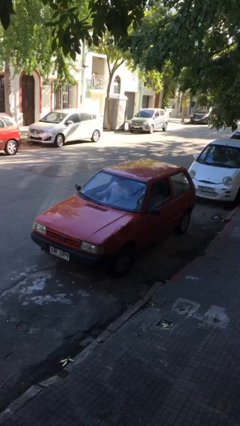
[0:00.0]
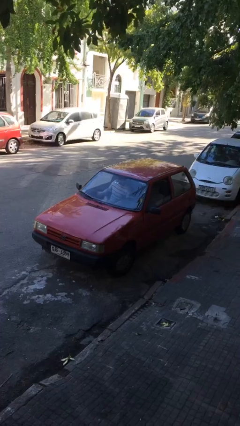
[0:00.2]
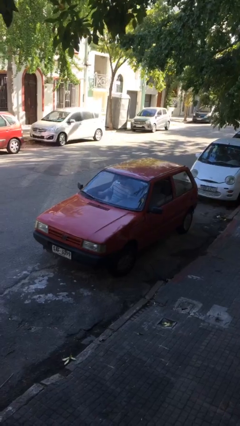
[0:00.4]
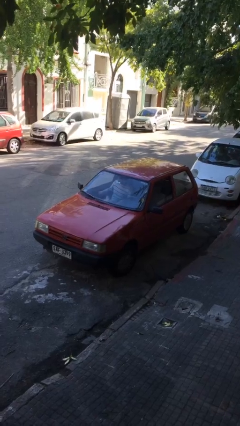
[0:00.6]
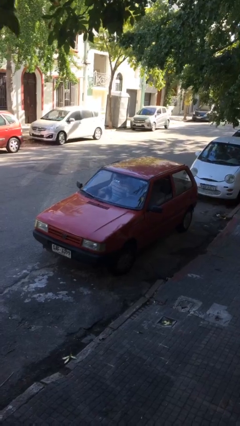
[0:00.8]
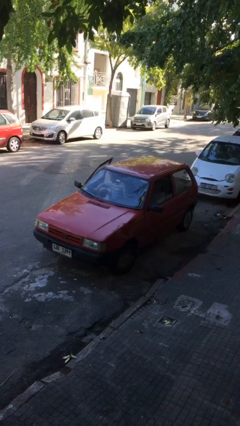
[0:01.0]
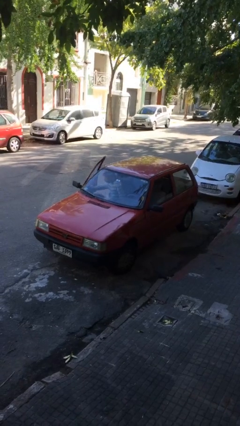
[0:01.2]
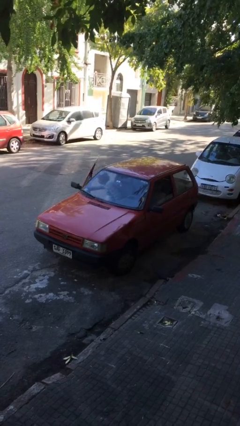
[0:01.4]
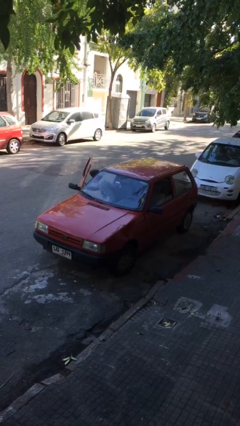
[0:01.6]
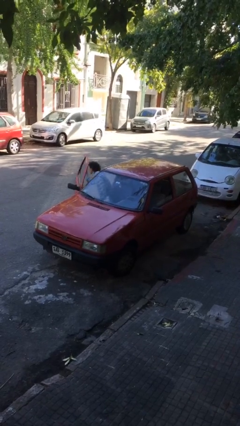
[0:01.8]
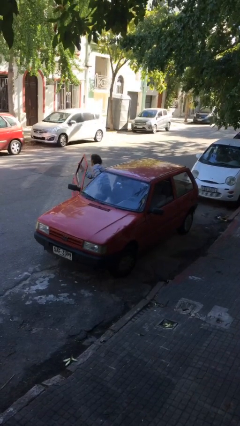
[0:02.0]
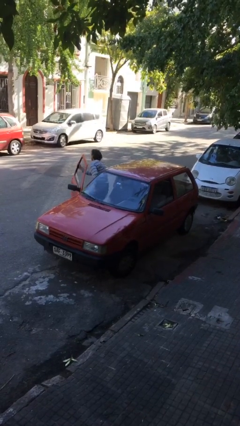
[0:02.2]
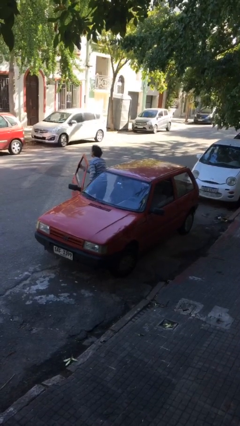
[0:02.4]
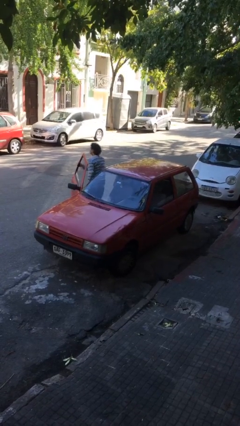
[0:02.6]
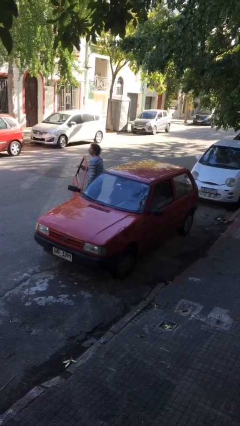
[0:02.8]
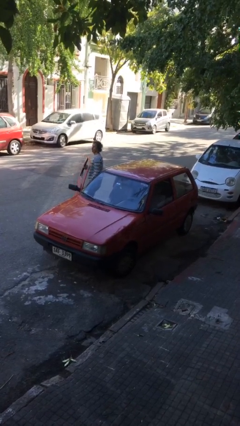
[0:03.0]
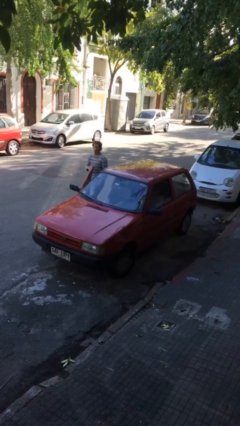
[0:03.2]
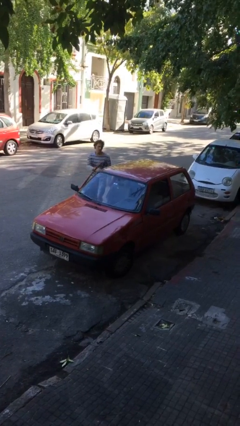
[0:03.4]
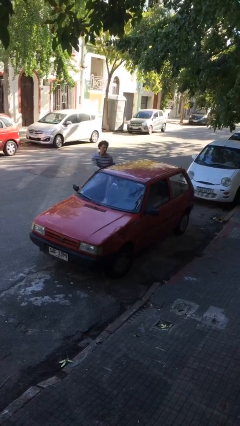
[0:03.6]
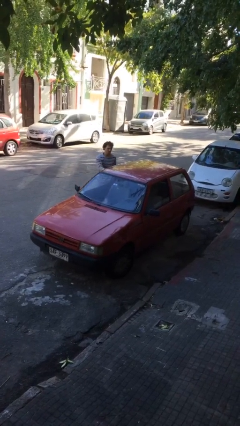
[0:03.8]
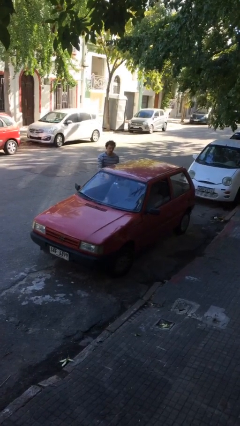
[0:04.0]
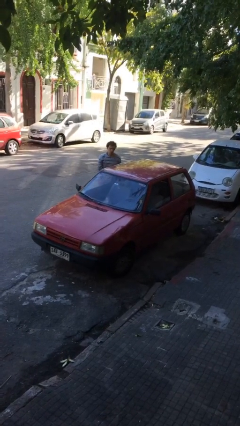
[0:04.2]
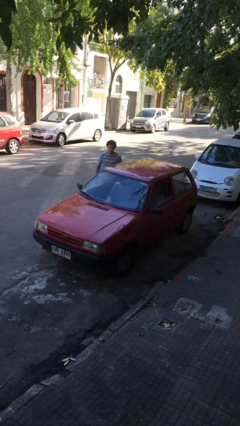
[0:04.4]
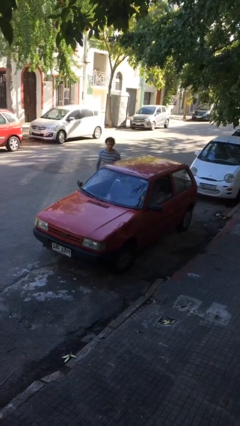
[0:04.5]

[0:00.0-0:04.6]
car drops off person

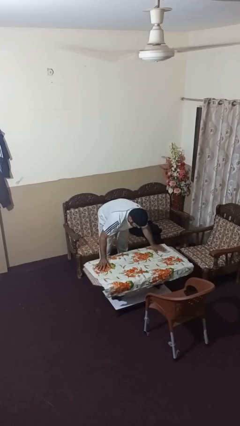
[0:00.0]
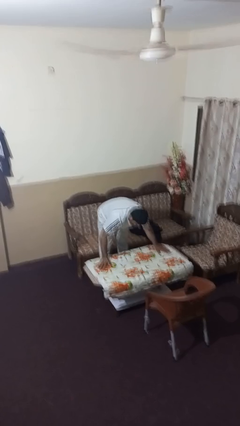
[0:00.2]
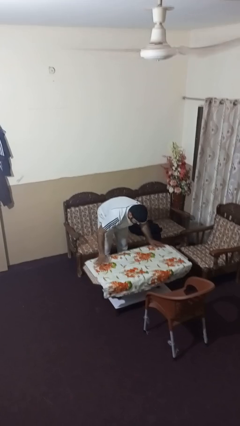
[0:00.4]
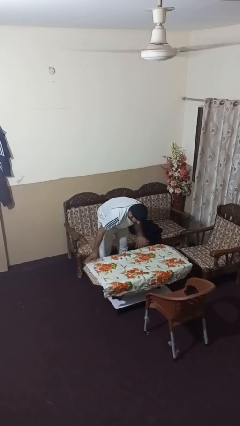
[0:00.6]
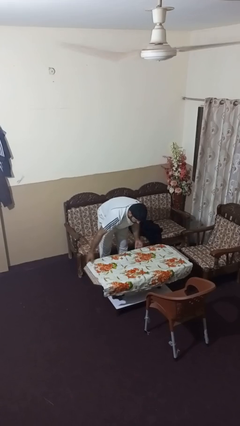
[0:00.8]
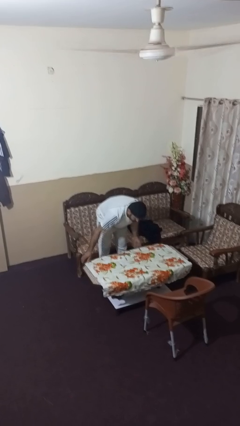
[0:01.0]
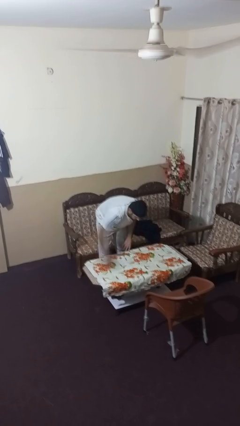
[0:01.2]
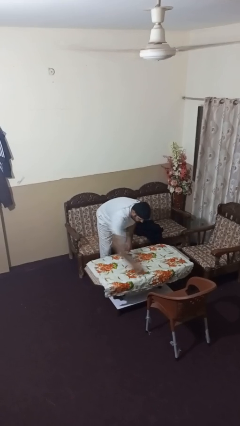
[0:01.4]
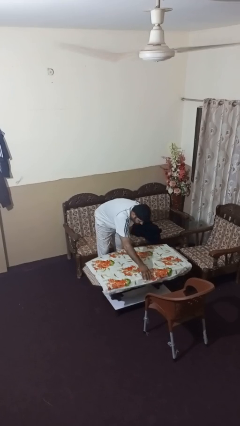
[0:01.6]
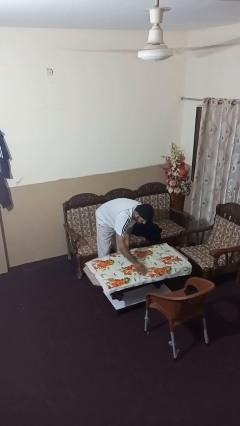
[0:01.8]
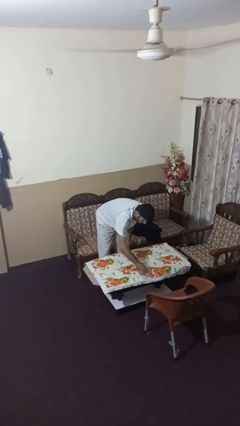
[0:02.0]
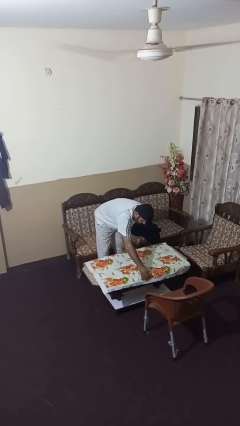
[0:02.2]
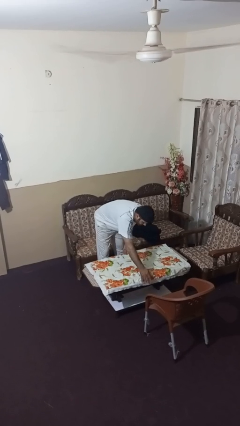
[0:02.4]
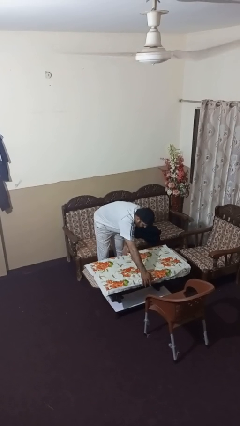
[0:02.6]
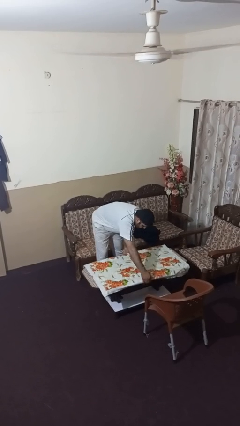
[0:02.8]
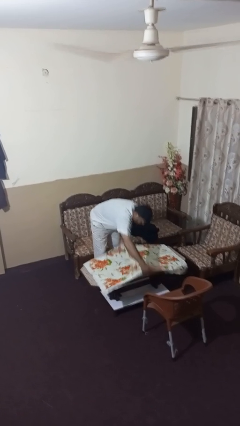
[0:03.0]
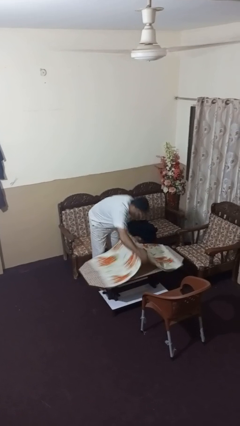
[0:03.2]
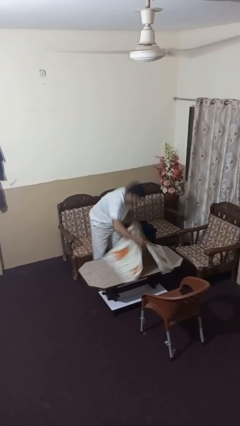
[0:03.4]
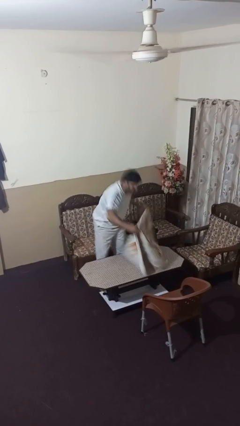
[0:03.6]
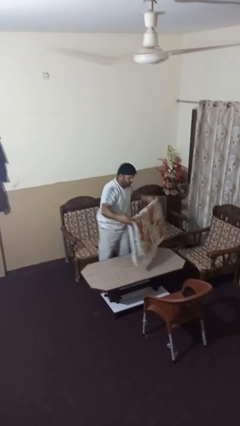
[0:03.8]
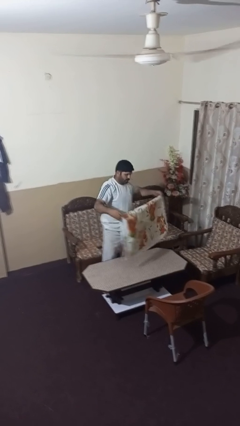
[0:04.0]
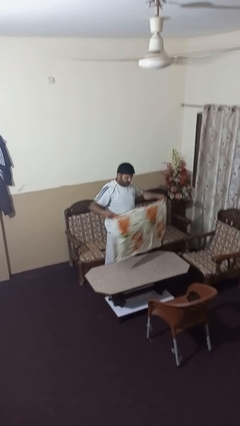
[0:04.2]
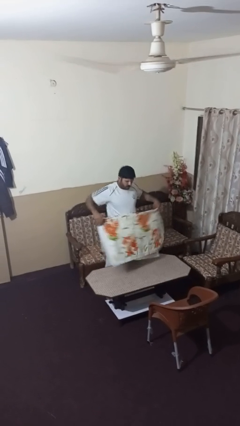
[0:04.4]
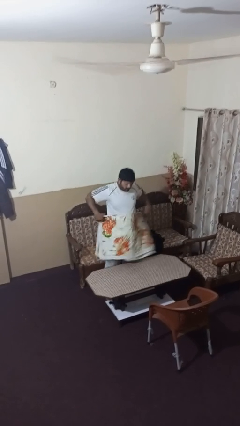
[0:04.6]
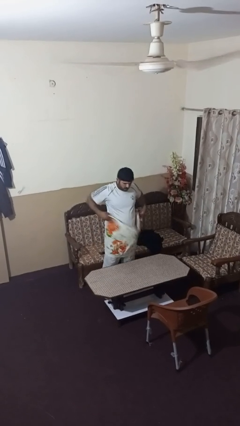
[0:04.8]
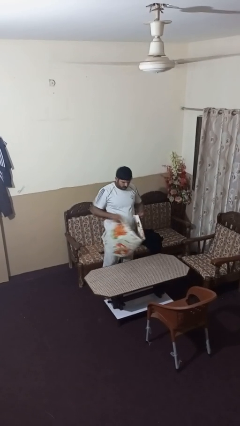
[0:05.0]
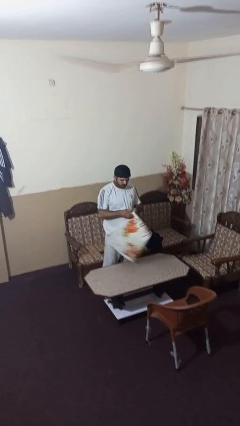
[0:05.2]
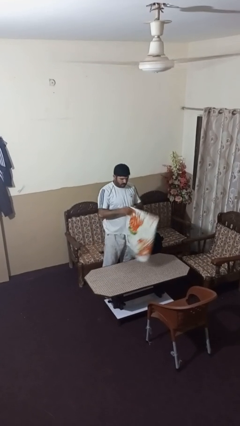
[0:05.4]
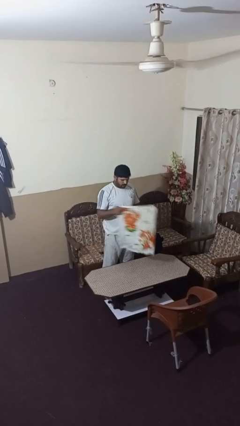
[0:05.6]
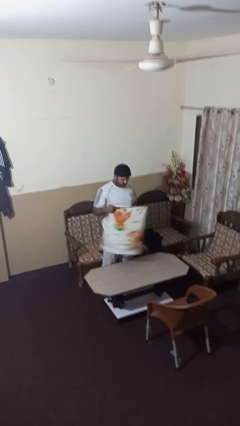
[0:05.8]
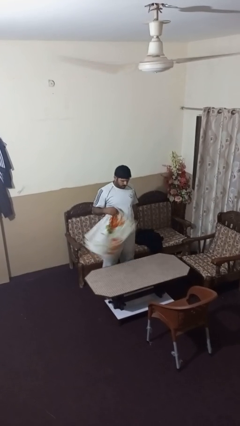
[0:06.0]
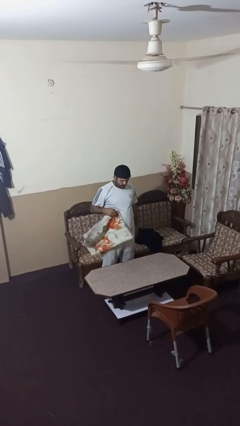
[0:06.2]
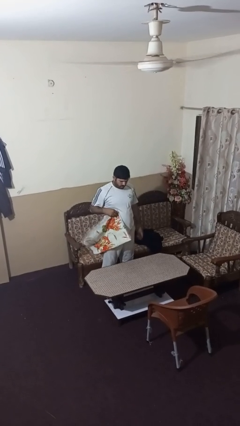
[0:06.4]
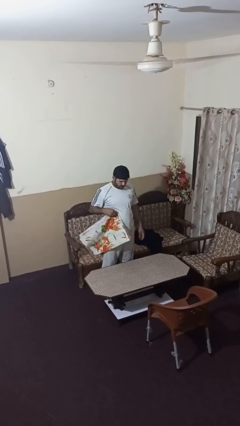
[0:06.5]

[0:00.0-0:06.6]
person folds tablecloth

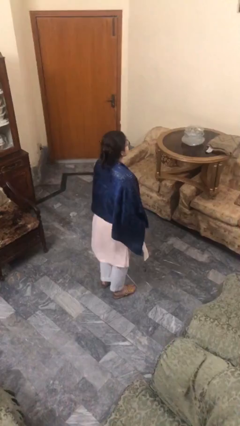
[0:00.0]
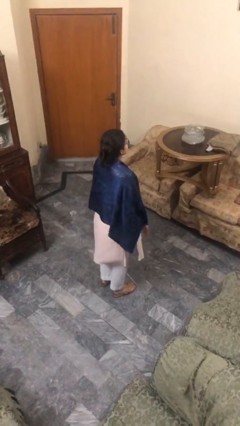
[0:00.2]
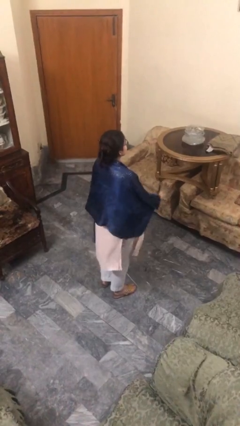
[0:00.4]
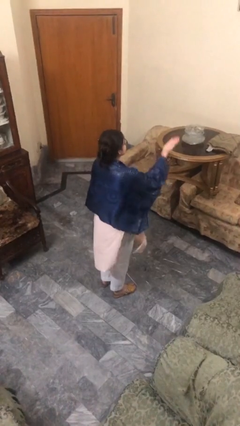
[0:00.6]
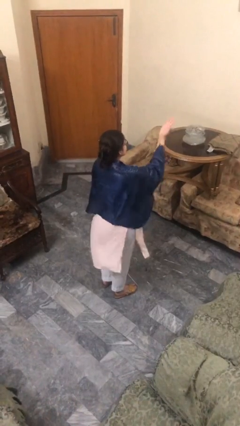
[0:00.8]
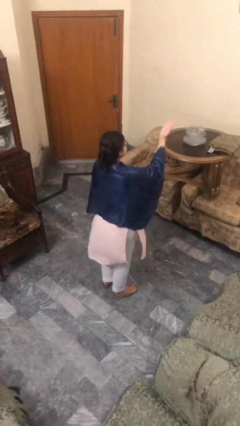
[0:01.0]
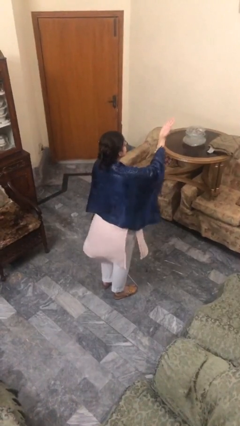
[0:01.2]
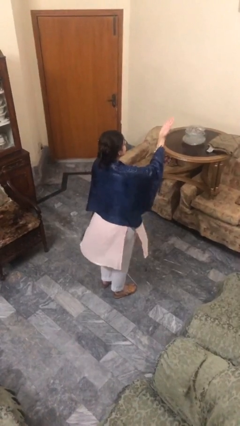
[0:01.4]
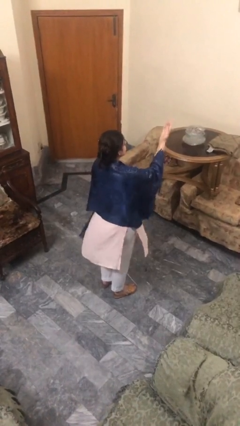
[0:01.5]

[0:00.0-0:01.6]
person gestures swipe up

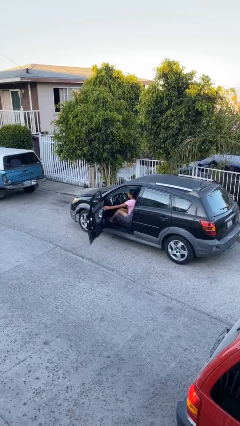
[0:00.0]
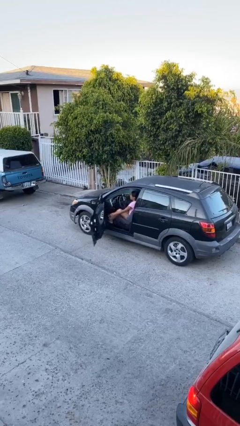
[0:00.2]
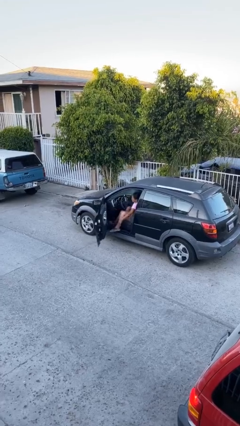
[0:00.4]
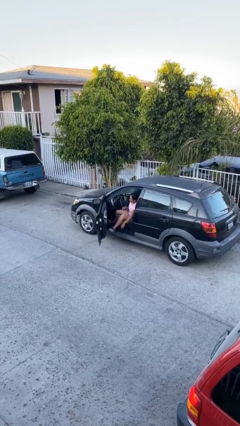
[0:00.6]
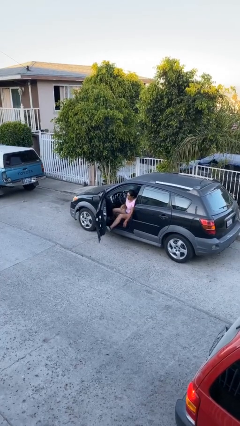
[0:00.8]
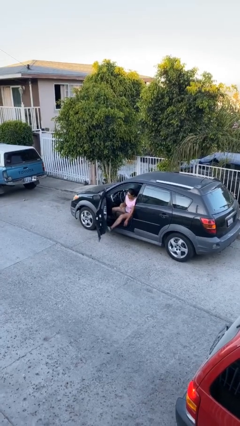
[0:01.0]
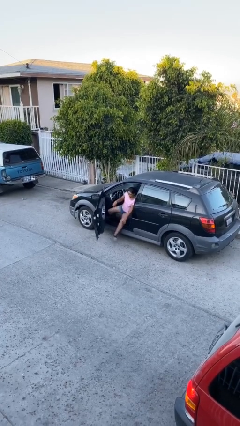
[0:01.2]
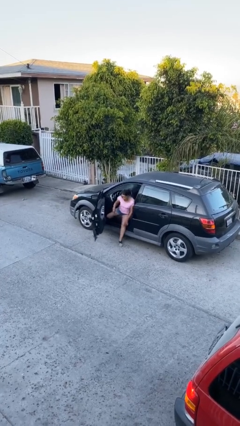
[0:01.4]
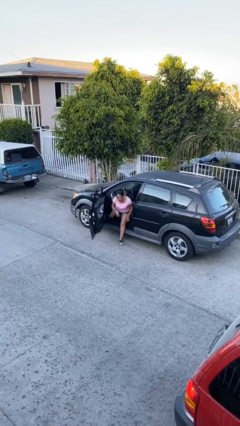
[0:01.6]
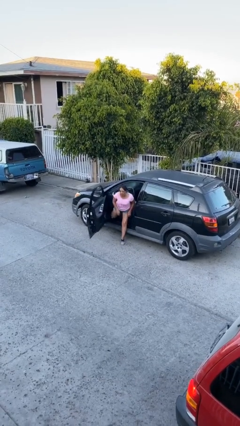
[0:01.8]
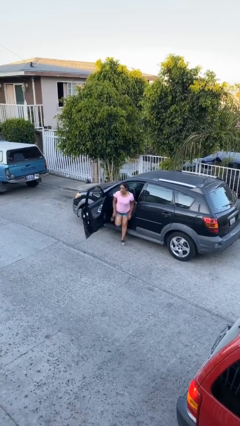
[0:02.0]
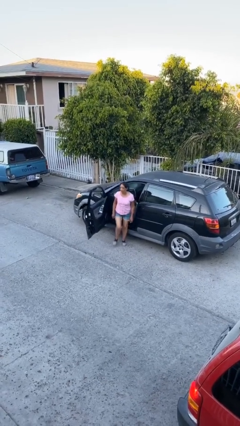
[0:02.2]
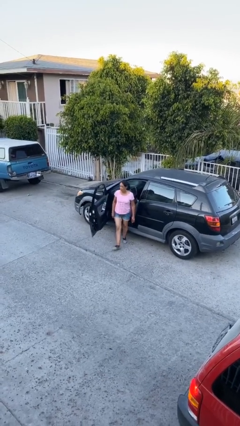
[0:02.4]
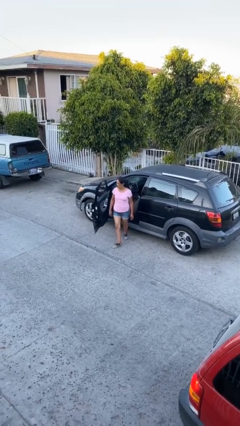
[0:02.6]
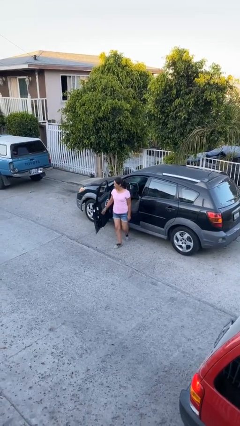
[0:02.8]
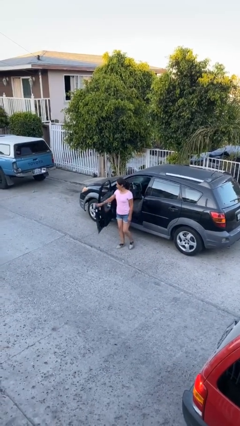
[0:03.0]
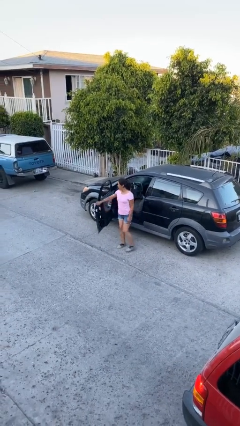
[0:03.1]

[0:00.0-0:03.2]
person exits car

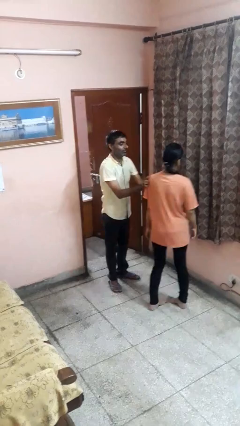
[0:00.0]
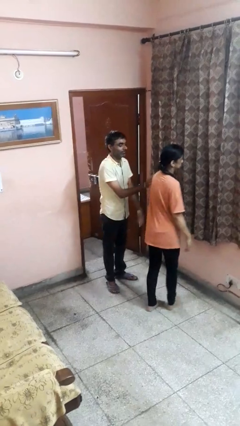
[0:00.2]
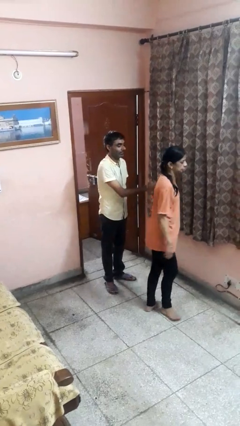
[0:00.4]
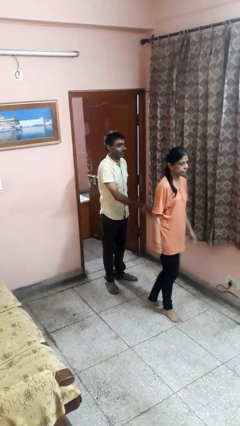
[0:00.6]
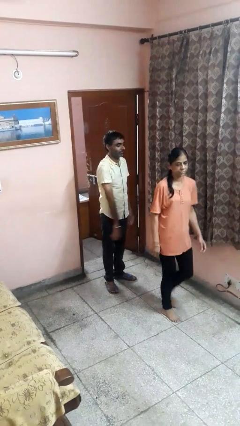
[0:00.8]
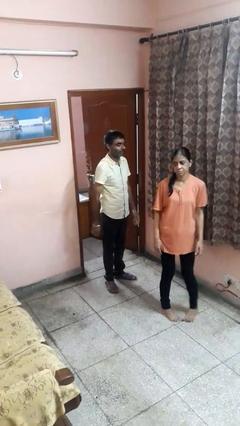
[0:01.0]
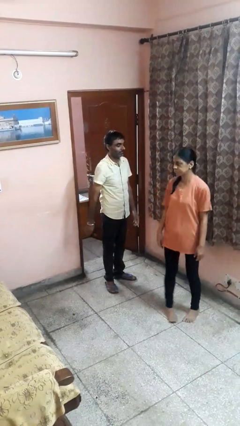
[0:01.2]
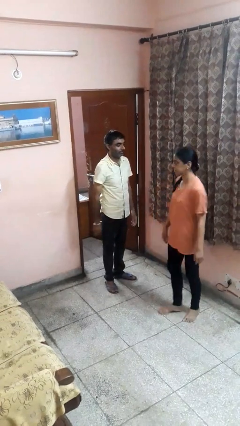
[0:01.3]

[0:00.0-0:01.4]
person spins person around
